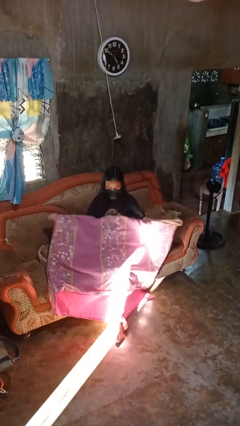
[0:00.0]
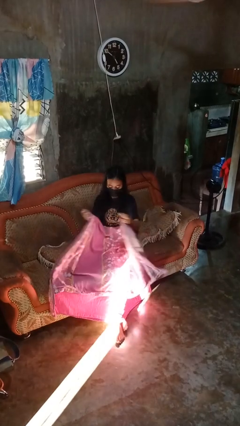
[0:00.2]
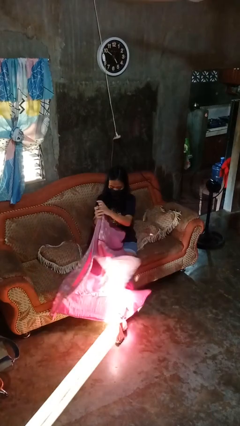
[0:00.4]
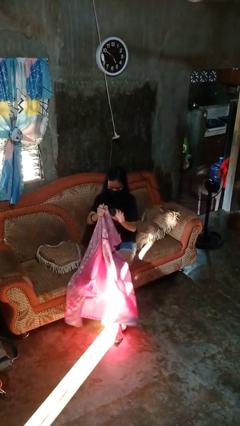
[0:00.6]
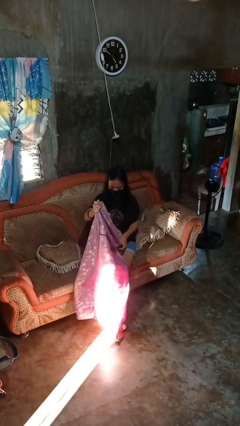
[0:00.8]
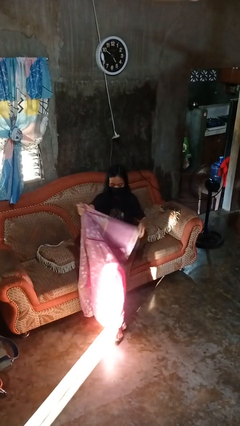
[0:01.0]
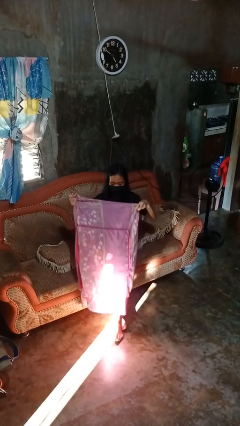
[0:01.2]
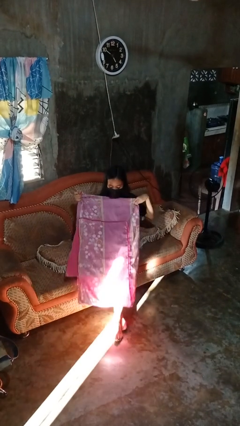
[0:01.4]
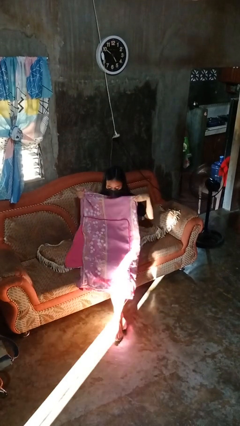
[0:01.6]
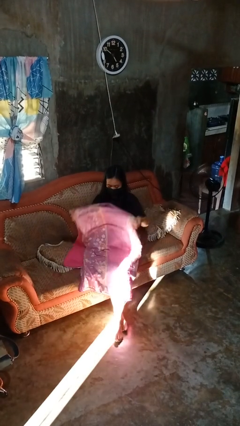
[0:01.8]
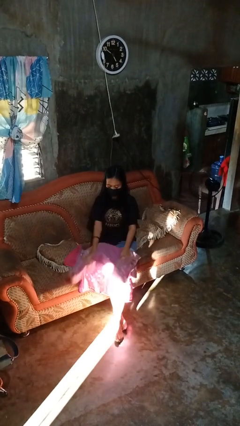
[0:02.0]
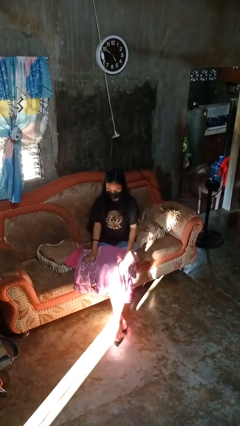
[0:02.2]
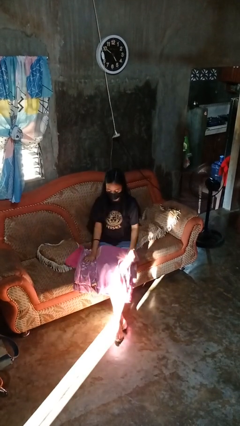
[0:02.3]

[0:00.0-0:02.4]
person folds blanket

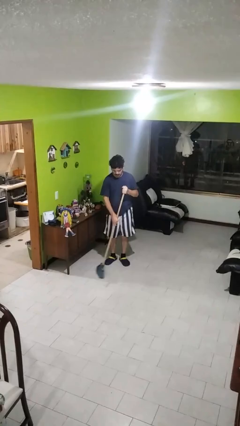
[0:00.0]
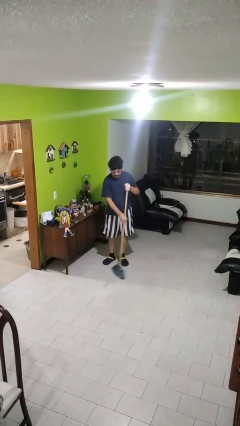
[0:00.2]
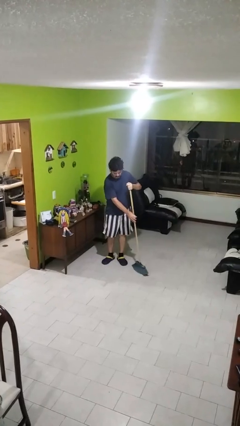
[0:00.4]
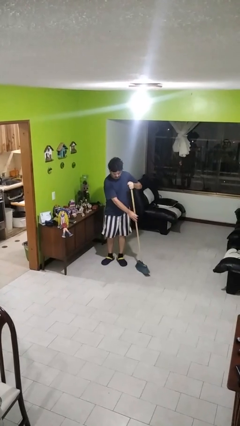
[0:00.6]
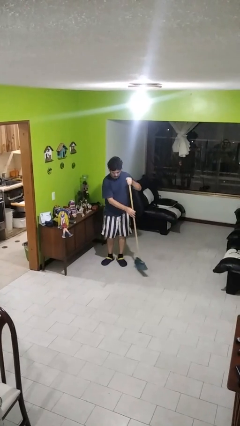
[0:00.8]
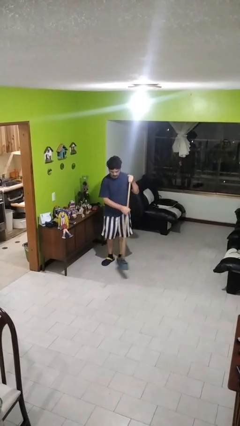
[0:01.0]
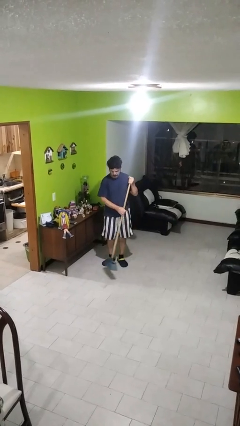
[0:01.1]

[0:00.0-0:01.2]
person sweeps floor

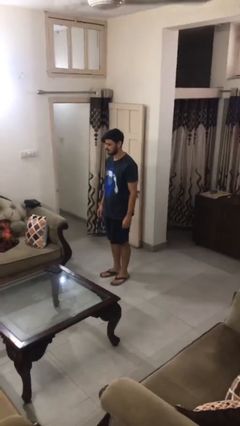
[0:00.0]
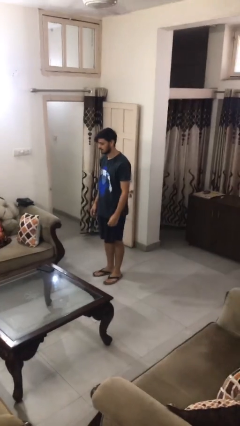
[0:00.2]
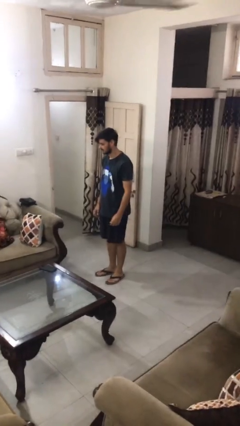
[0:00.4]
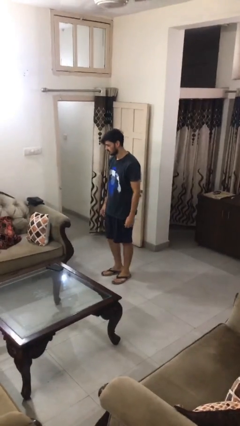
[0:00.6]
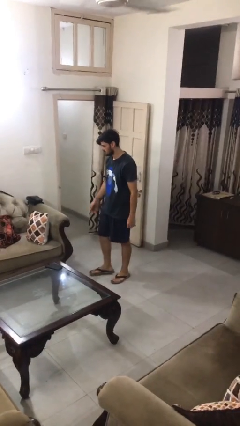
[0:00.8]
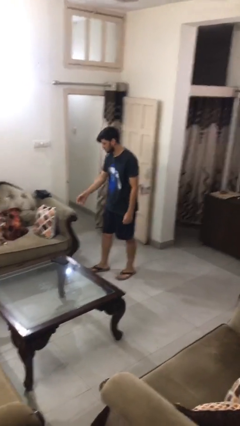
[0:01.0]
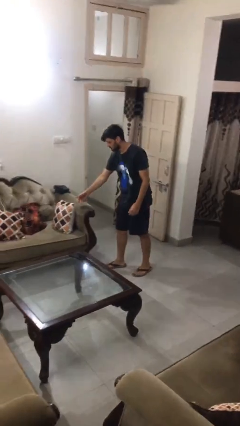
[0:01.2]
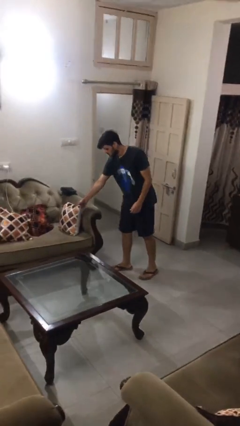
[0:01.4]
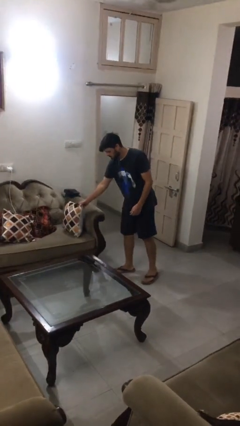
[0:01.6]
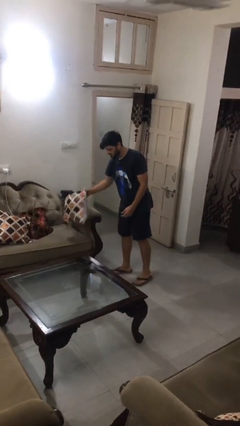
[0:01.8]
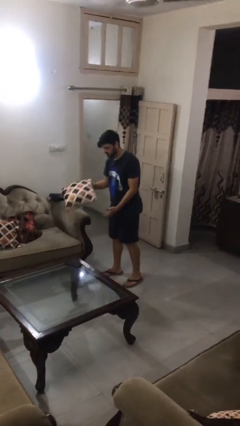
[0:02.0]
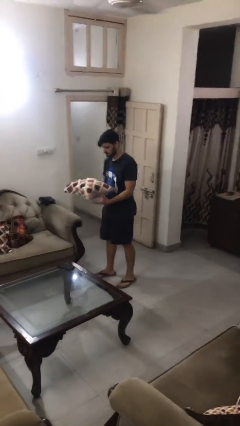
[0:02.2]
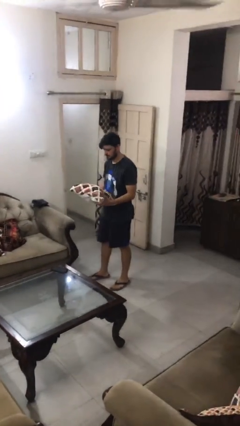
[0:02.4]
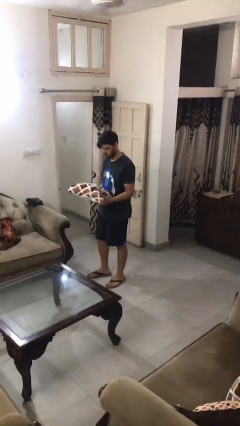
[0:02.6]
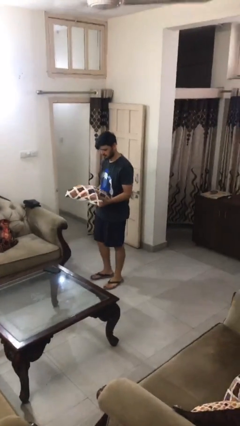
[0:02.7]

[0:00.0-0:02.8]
person picks up object from couch

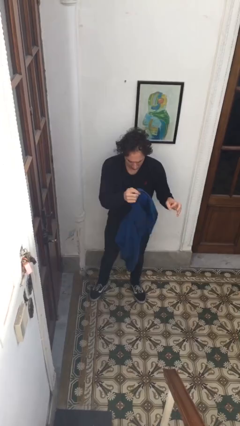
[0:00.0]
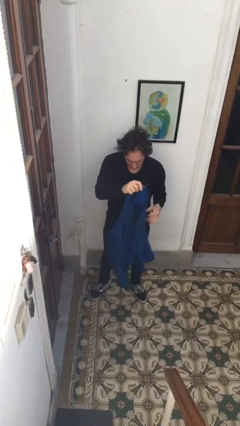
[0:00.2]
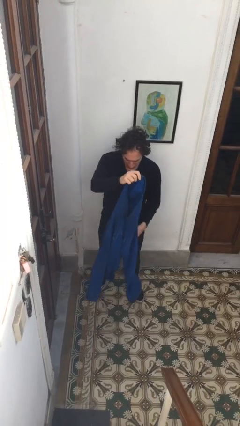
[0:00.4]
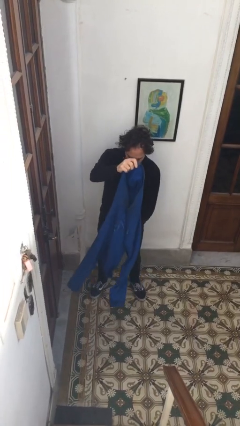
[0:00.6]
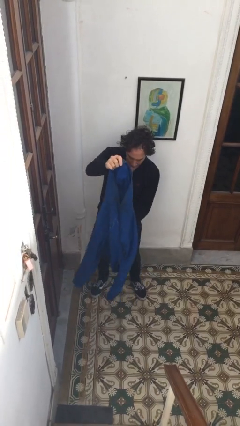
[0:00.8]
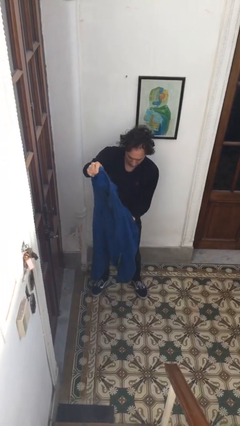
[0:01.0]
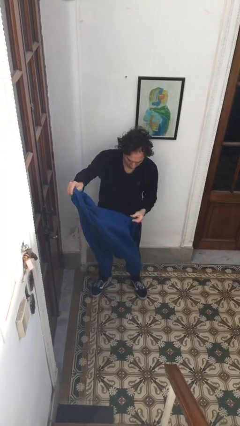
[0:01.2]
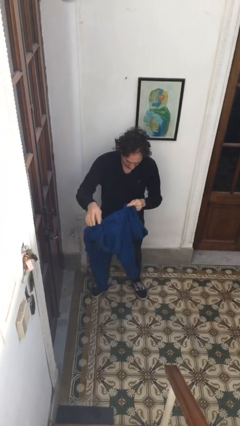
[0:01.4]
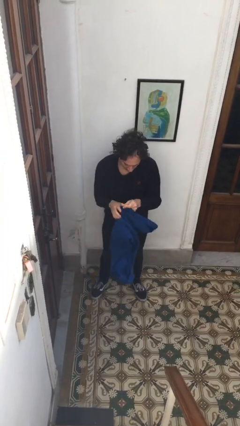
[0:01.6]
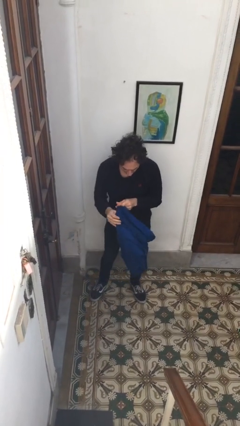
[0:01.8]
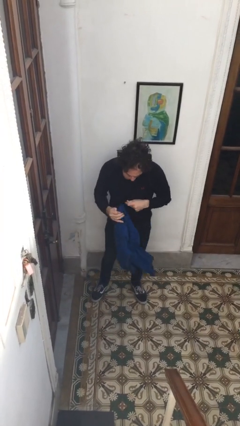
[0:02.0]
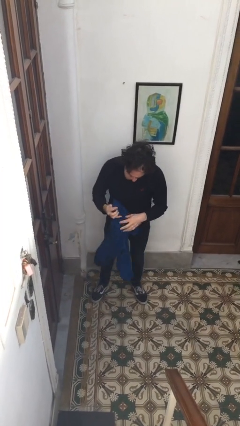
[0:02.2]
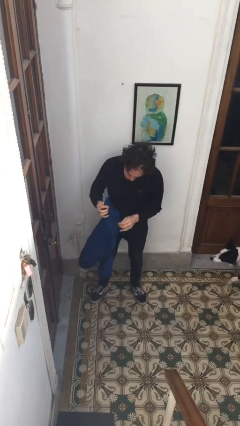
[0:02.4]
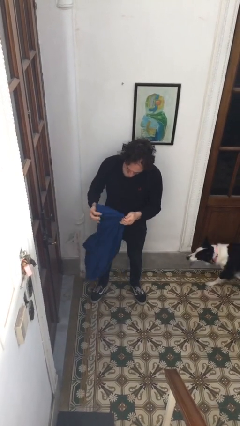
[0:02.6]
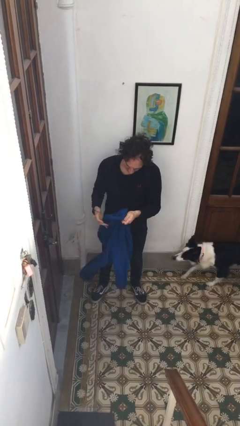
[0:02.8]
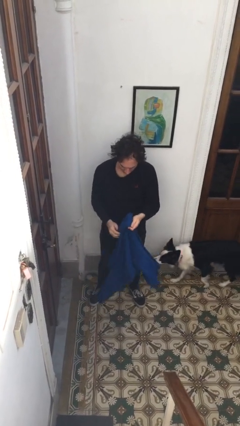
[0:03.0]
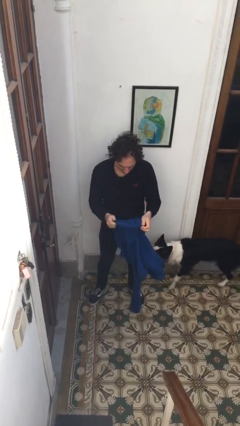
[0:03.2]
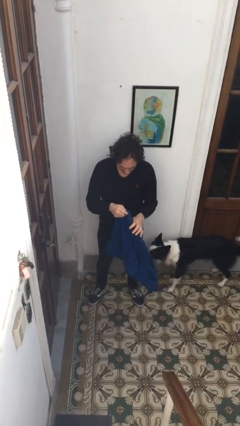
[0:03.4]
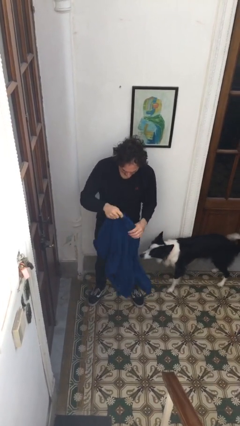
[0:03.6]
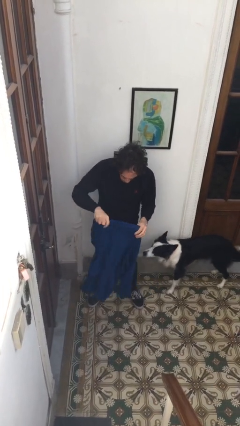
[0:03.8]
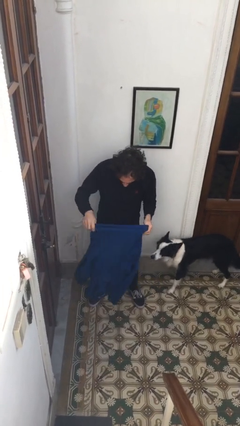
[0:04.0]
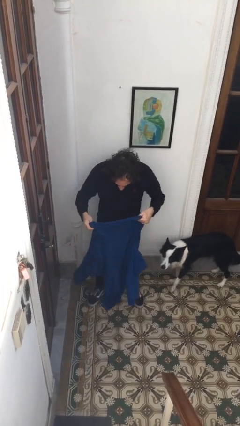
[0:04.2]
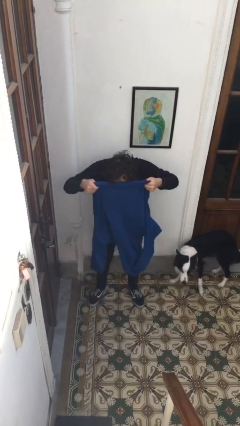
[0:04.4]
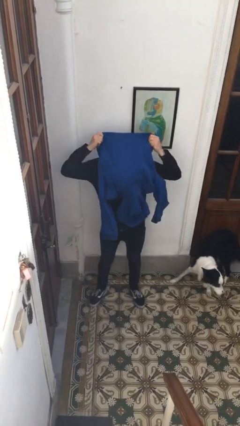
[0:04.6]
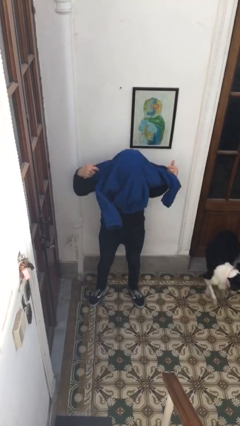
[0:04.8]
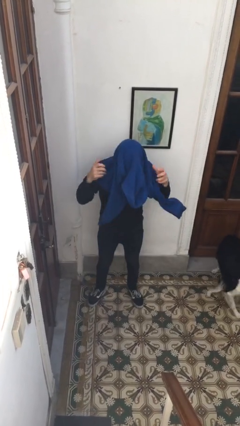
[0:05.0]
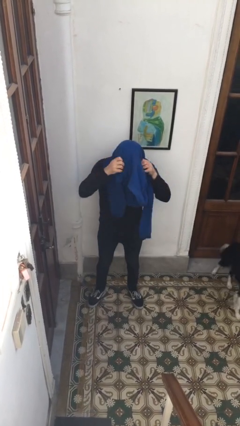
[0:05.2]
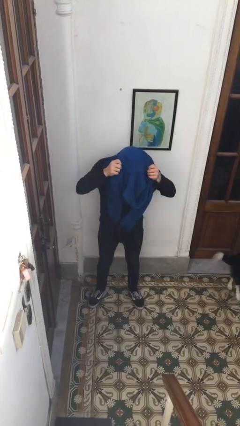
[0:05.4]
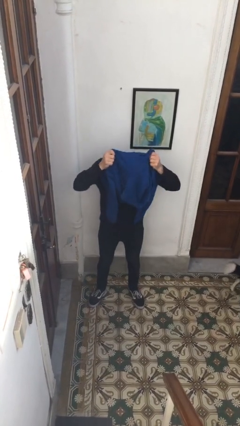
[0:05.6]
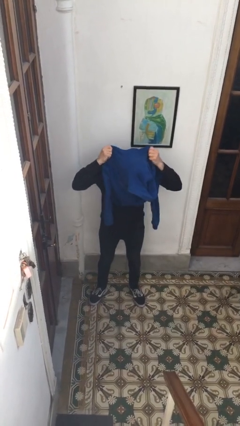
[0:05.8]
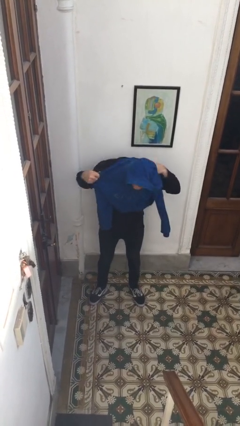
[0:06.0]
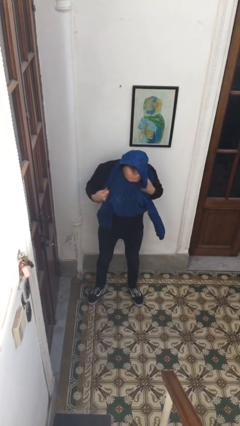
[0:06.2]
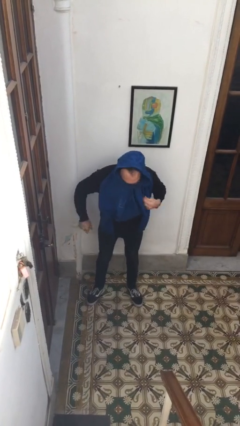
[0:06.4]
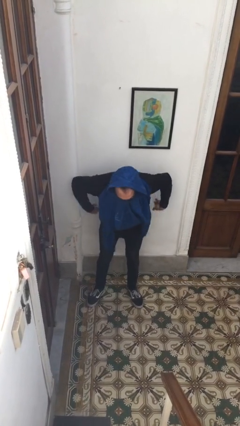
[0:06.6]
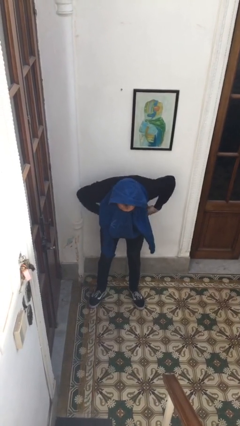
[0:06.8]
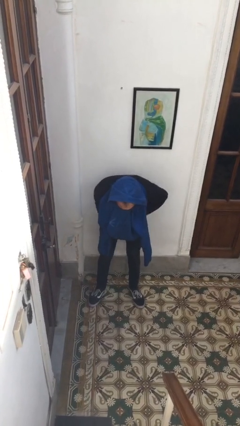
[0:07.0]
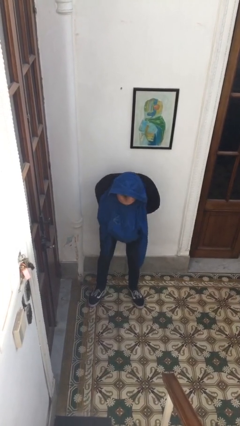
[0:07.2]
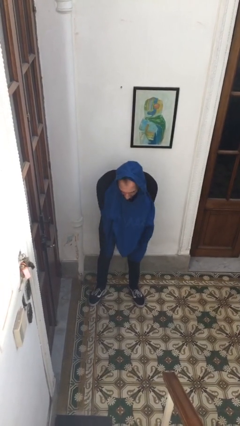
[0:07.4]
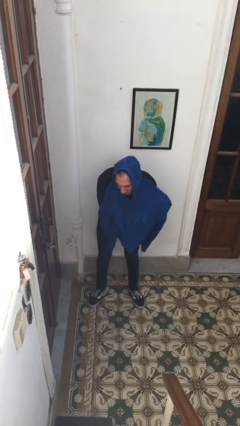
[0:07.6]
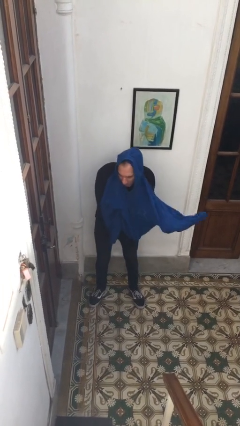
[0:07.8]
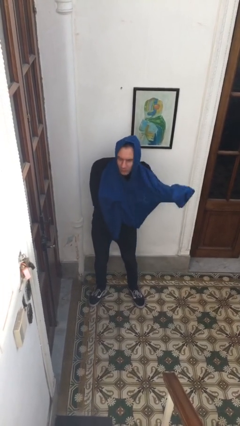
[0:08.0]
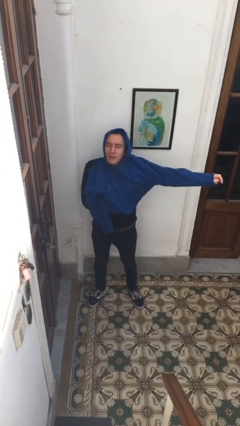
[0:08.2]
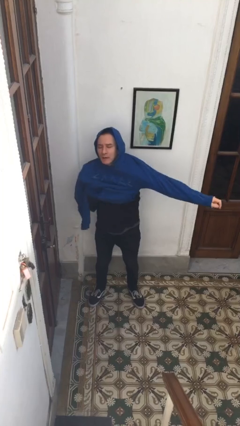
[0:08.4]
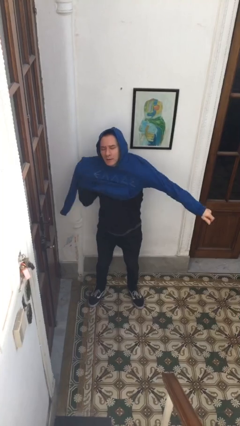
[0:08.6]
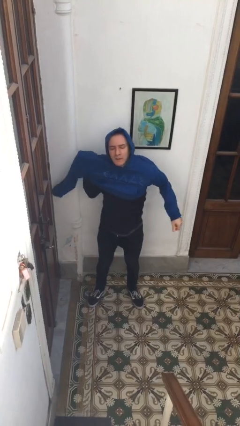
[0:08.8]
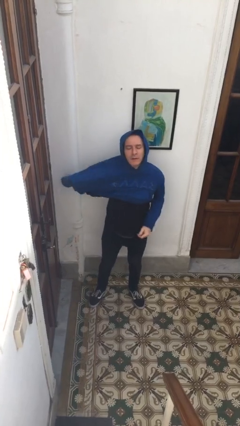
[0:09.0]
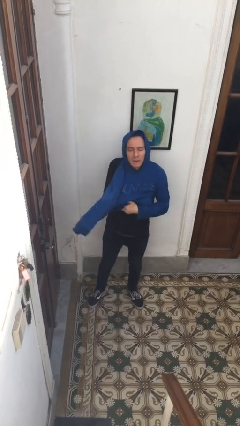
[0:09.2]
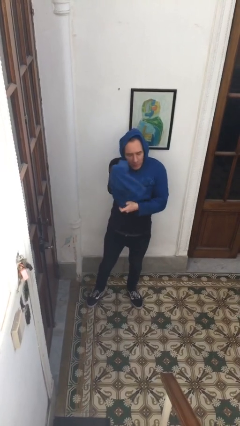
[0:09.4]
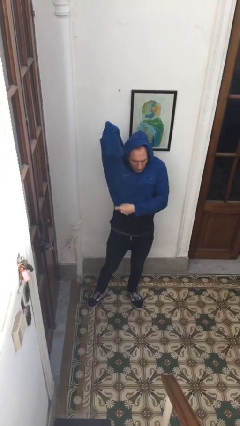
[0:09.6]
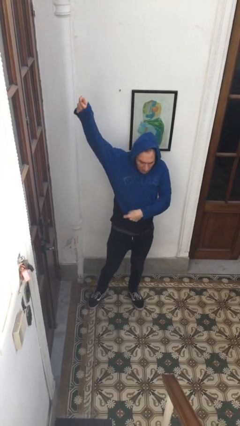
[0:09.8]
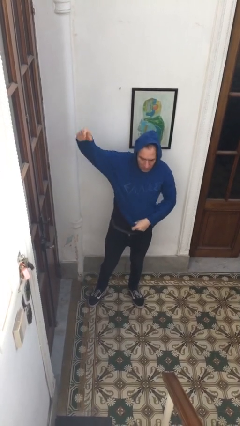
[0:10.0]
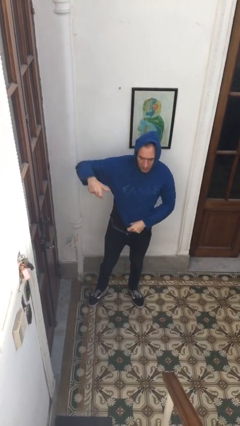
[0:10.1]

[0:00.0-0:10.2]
person puts on hoodie

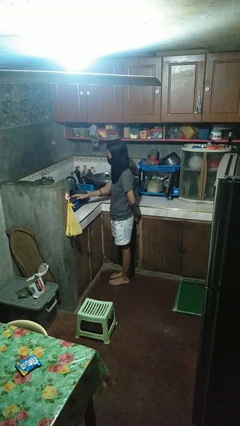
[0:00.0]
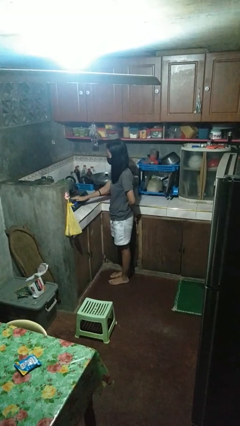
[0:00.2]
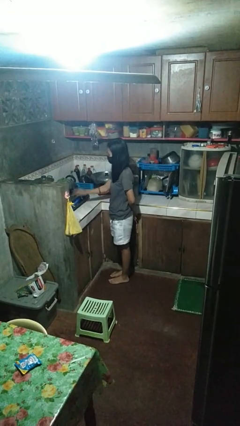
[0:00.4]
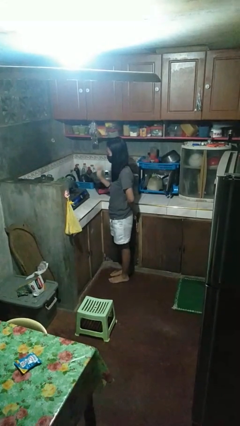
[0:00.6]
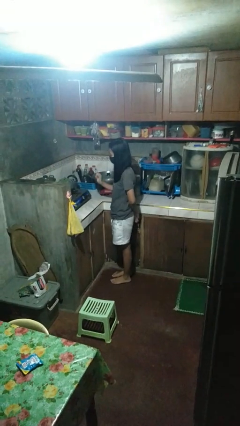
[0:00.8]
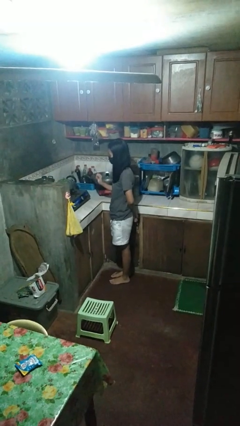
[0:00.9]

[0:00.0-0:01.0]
person burns hand
